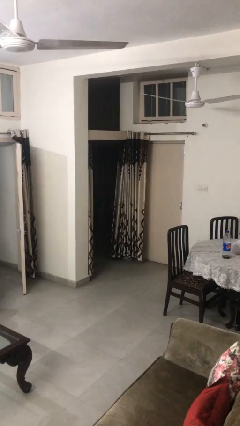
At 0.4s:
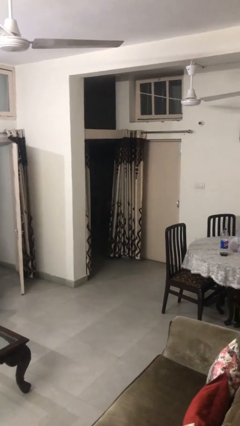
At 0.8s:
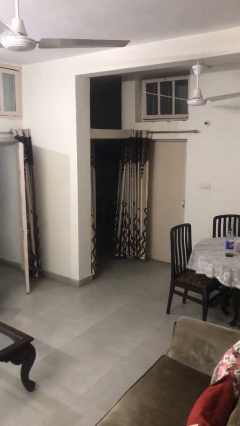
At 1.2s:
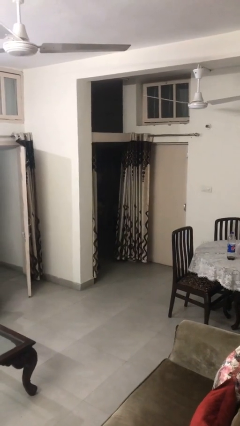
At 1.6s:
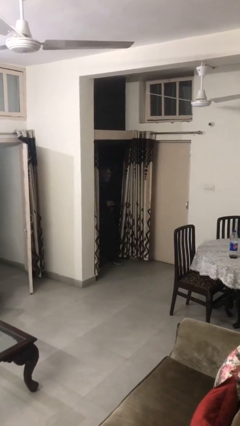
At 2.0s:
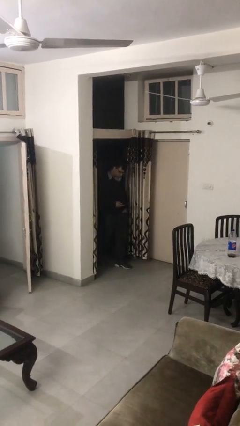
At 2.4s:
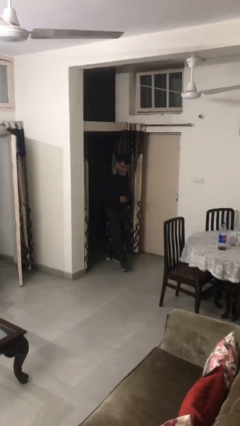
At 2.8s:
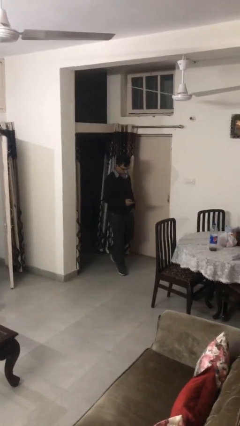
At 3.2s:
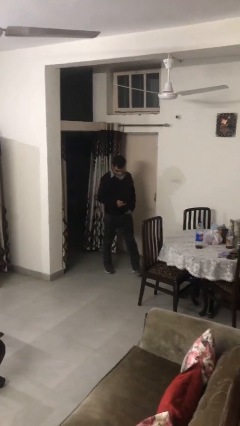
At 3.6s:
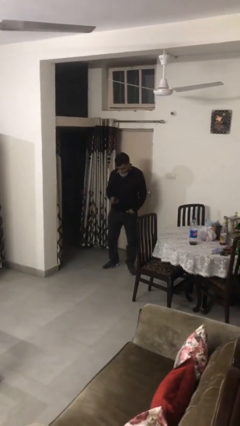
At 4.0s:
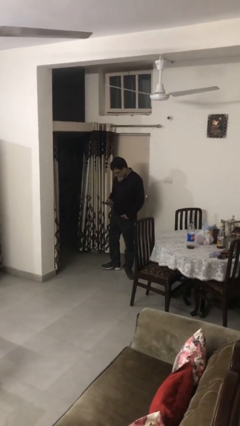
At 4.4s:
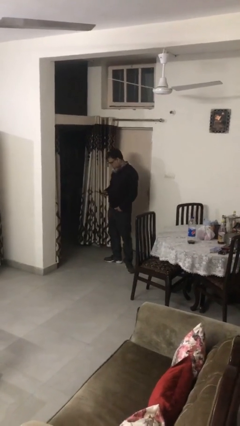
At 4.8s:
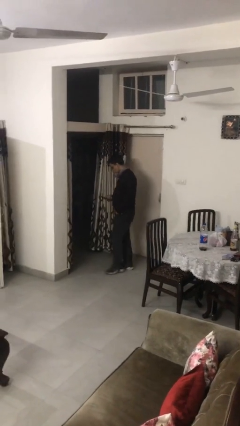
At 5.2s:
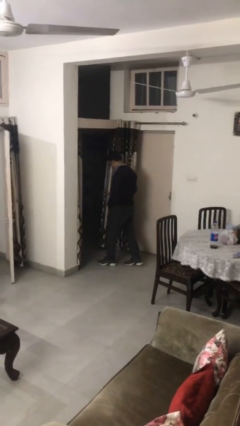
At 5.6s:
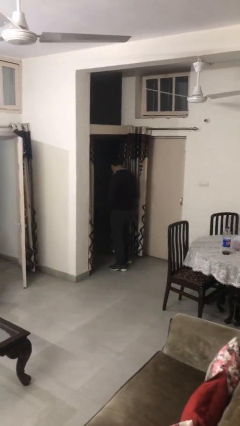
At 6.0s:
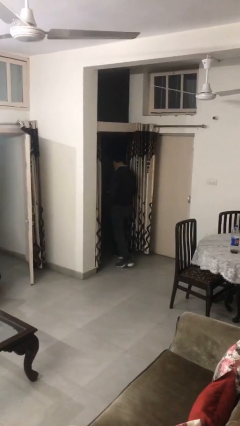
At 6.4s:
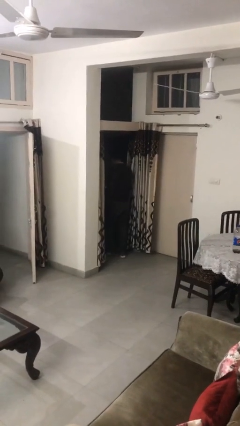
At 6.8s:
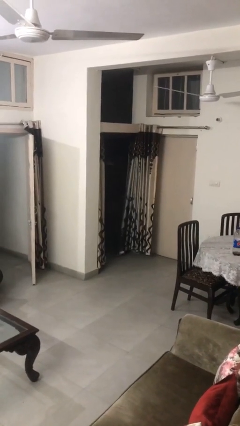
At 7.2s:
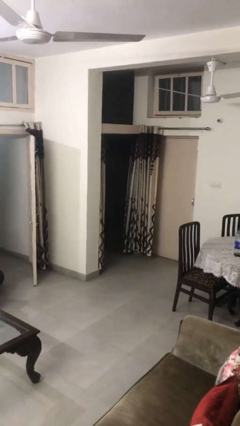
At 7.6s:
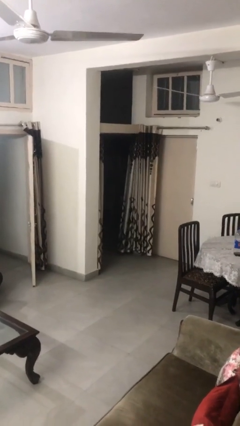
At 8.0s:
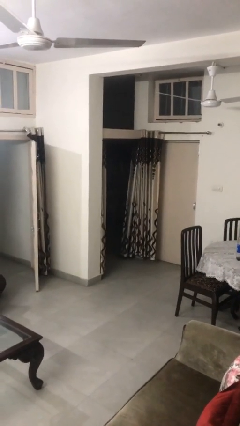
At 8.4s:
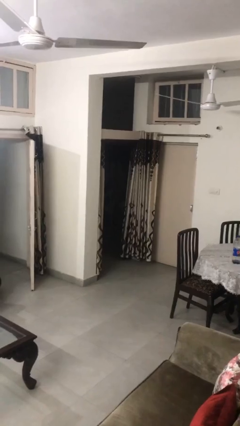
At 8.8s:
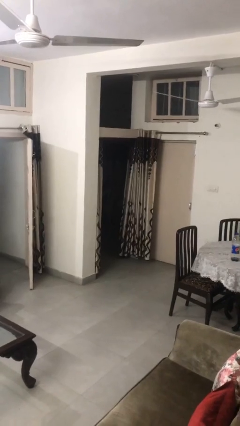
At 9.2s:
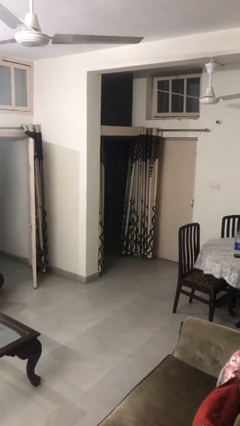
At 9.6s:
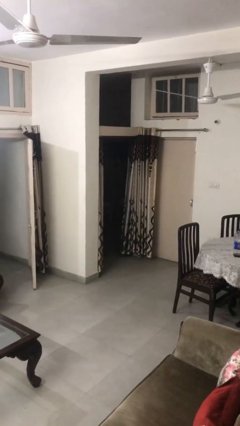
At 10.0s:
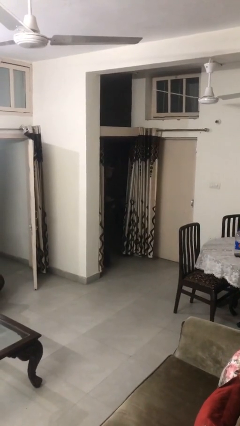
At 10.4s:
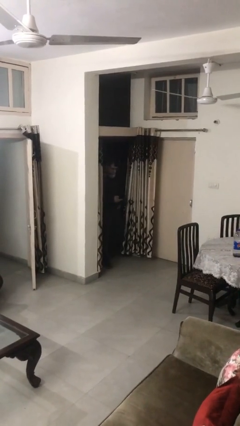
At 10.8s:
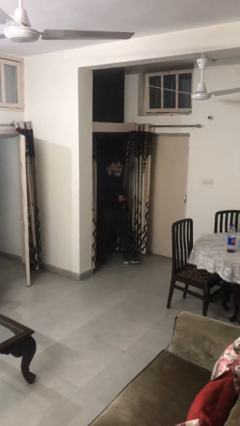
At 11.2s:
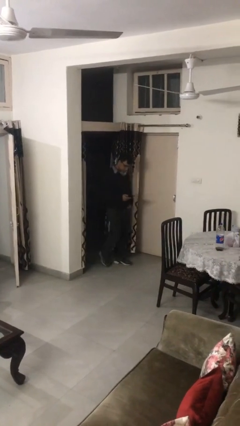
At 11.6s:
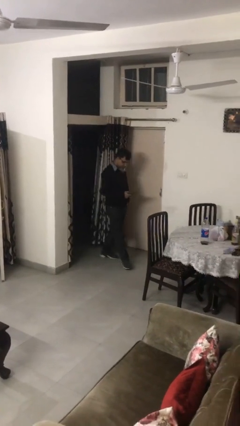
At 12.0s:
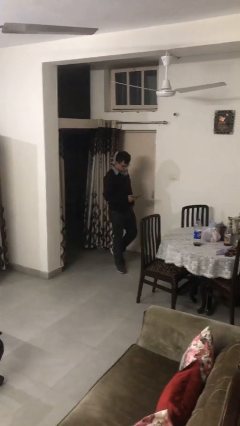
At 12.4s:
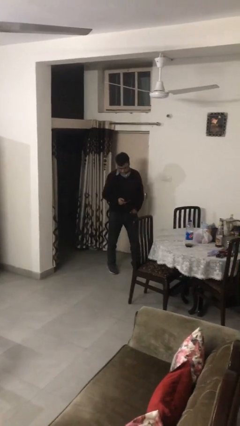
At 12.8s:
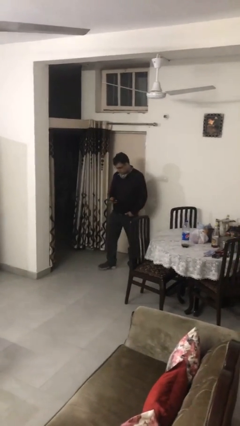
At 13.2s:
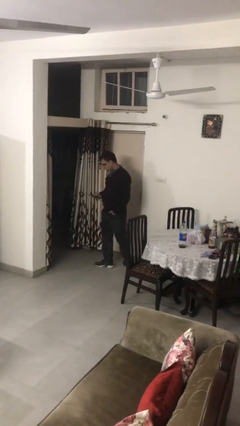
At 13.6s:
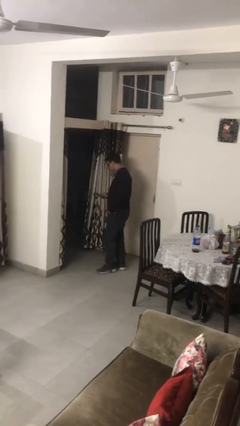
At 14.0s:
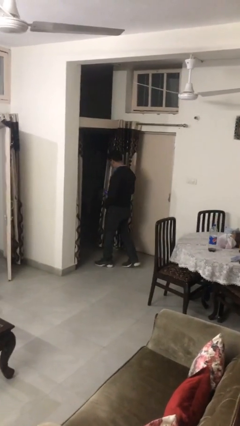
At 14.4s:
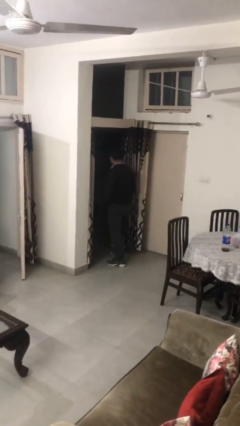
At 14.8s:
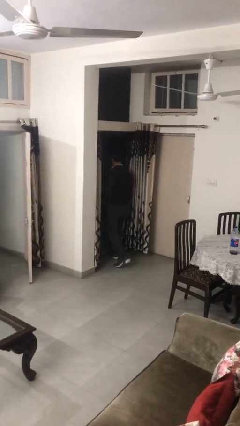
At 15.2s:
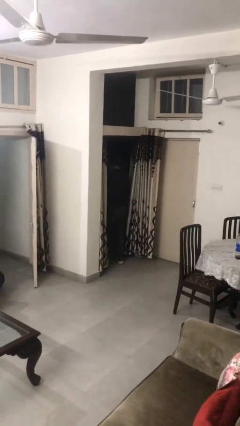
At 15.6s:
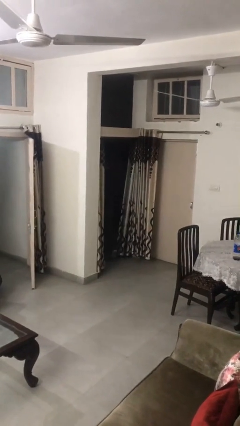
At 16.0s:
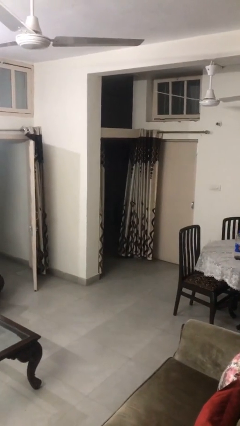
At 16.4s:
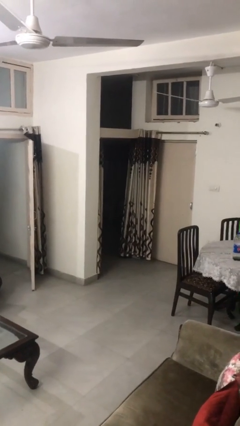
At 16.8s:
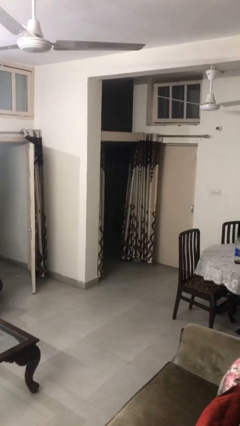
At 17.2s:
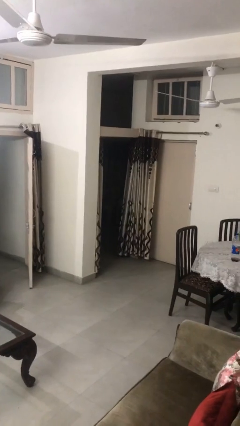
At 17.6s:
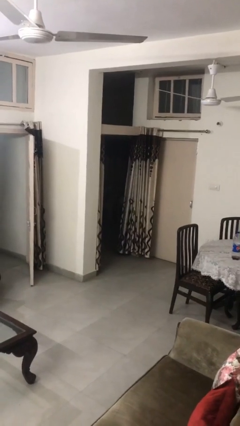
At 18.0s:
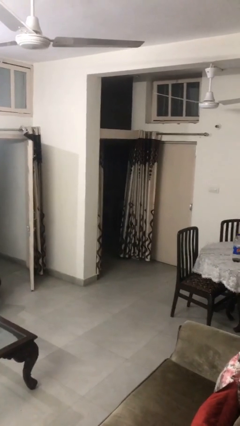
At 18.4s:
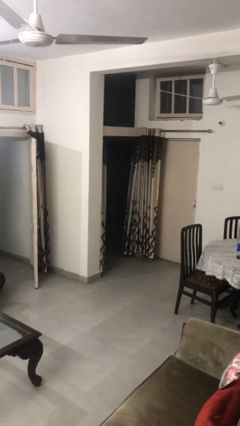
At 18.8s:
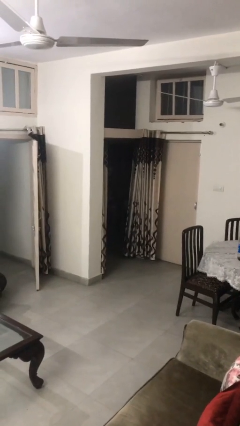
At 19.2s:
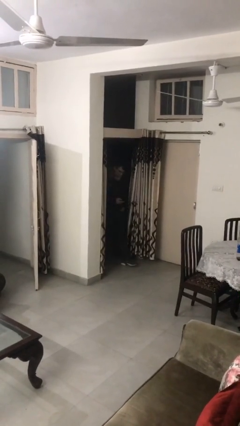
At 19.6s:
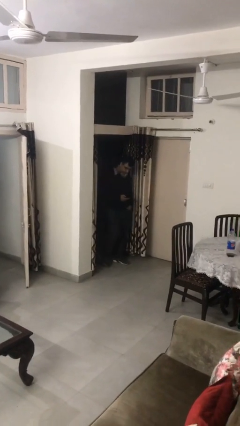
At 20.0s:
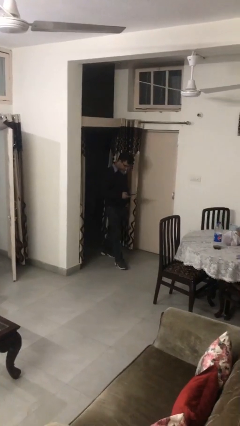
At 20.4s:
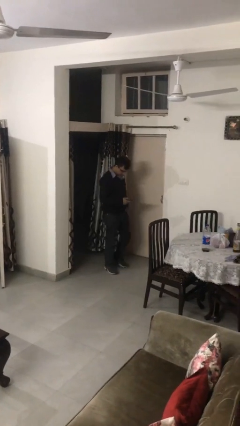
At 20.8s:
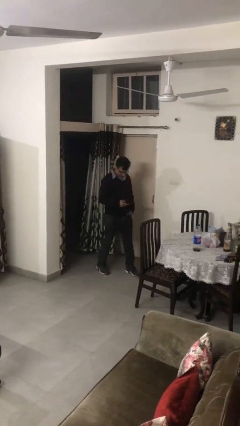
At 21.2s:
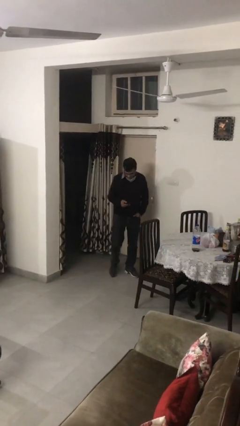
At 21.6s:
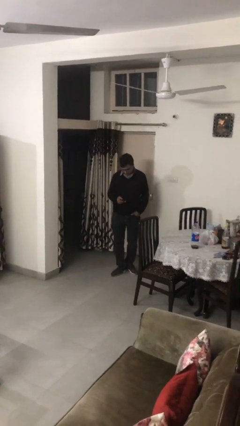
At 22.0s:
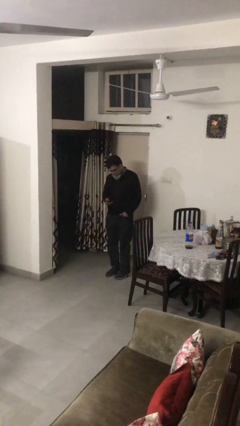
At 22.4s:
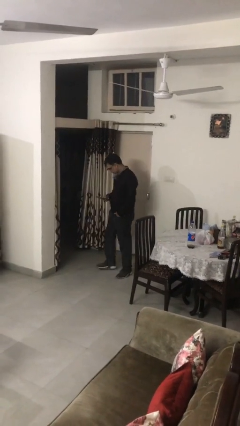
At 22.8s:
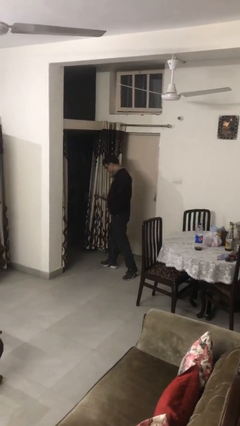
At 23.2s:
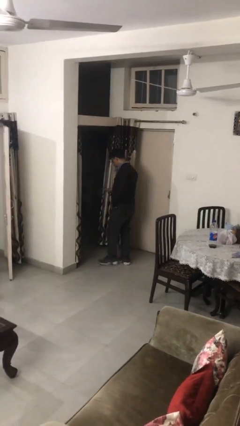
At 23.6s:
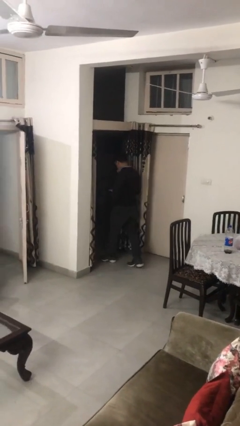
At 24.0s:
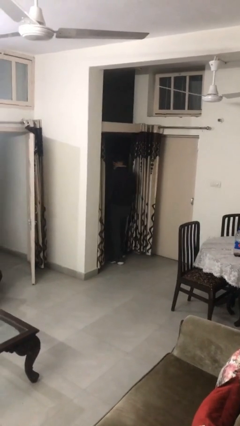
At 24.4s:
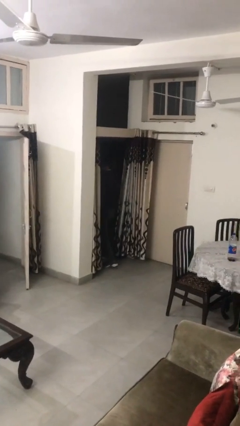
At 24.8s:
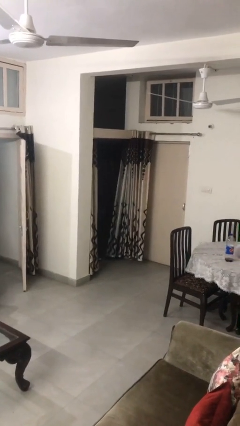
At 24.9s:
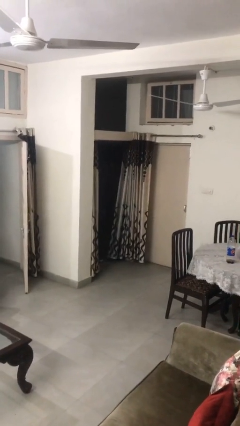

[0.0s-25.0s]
person texts on phone

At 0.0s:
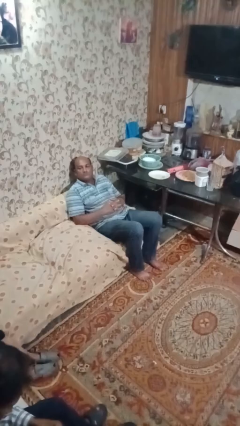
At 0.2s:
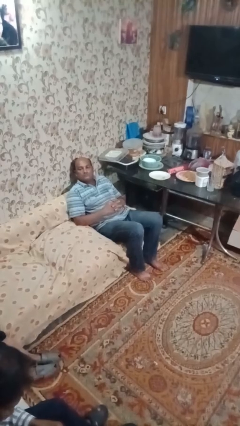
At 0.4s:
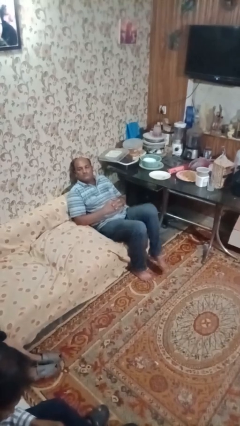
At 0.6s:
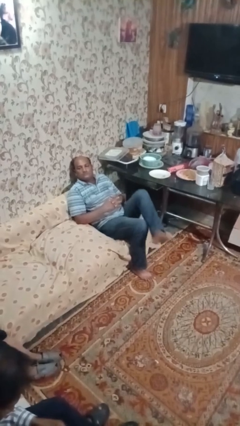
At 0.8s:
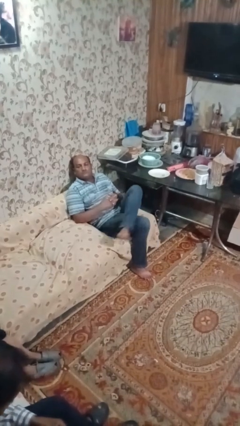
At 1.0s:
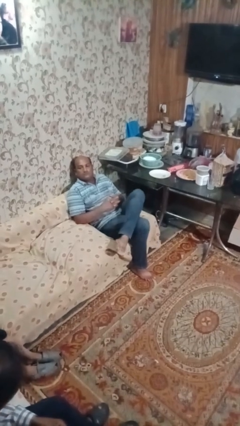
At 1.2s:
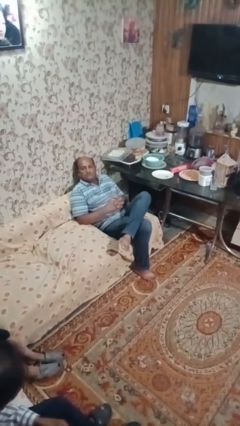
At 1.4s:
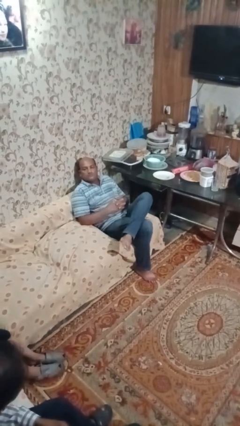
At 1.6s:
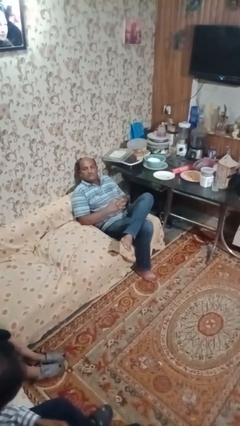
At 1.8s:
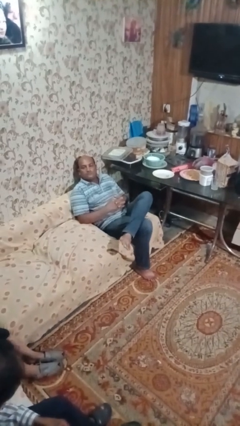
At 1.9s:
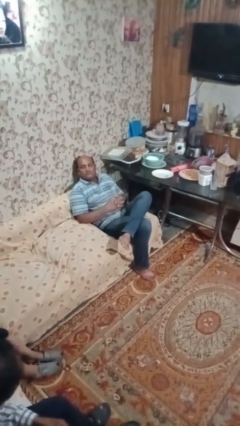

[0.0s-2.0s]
person crosses legs

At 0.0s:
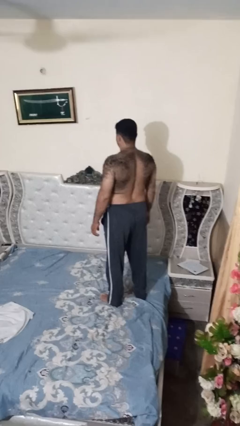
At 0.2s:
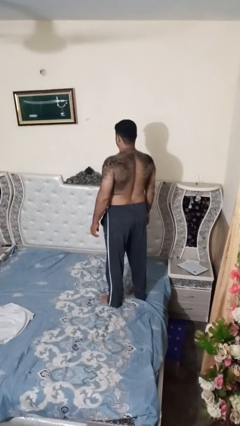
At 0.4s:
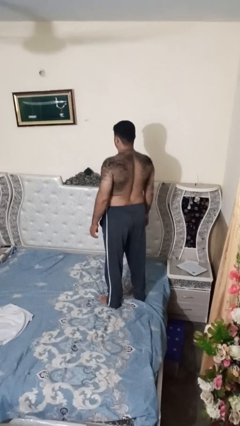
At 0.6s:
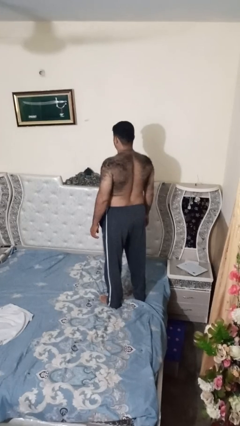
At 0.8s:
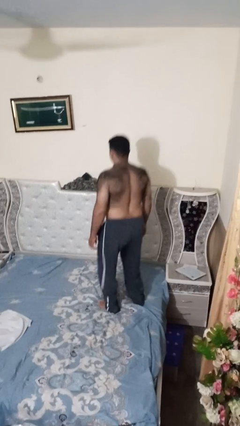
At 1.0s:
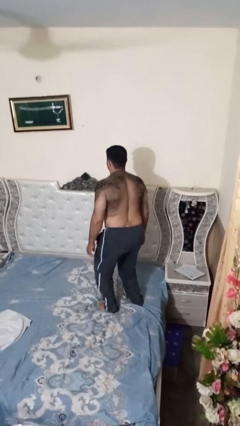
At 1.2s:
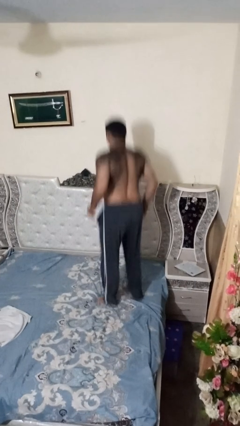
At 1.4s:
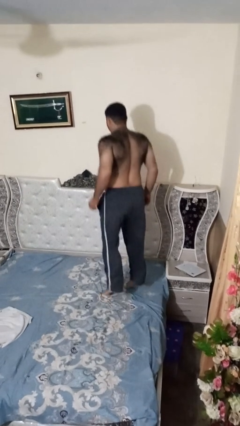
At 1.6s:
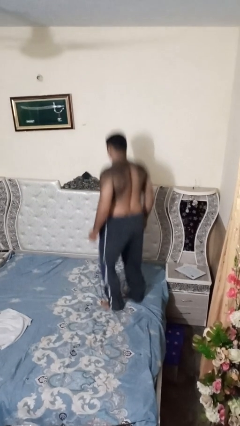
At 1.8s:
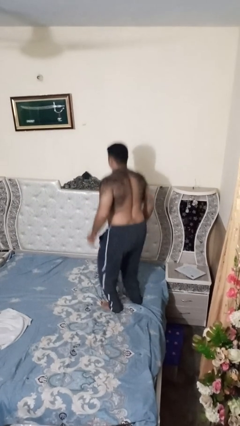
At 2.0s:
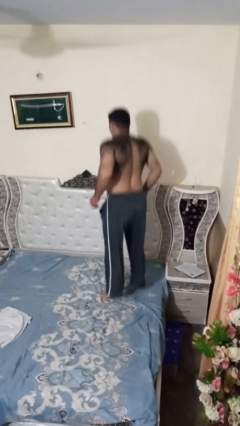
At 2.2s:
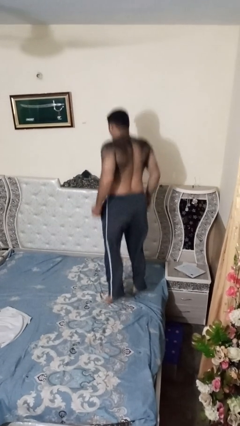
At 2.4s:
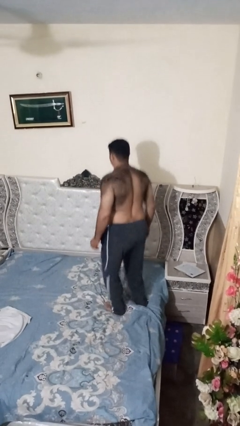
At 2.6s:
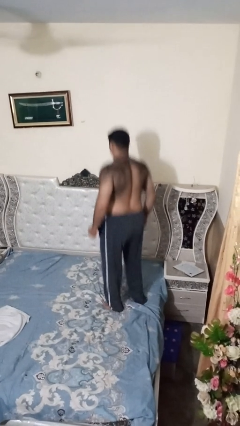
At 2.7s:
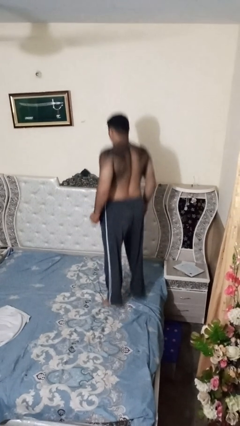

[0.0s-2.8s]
person jumps on bed

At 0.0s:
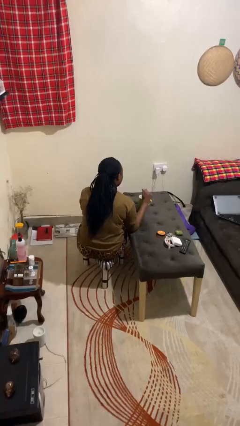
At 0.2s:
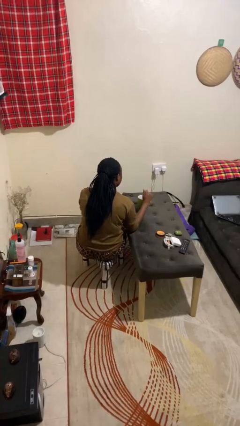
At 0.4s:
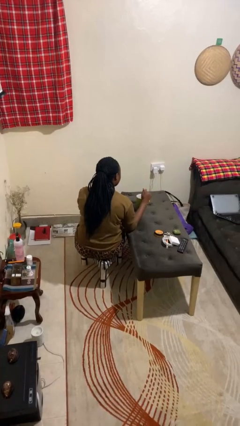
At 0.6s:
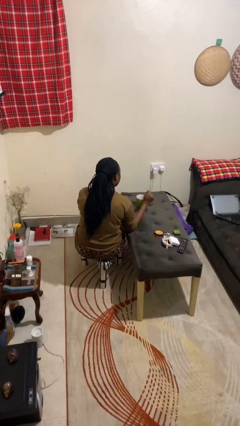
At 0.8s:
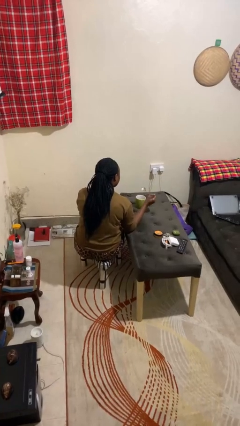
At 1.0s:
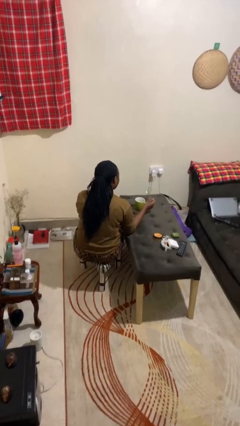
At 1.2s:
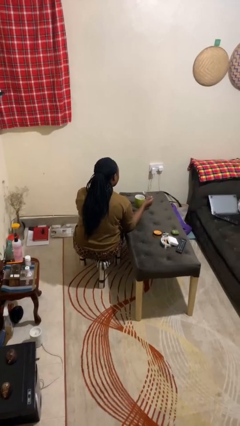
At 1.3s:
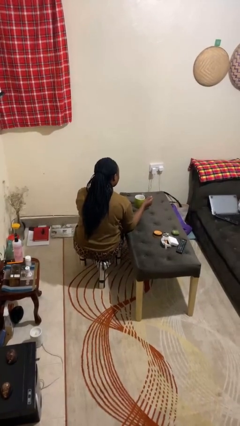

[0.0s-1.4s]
person stirs mug
